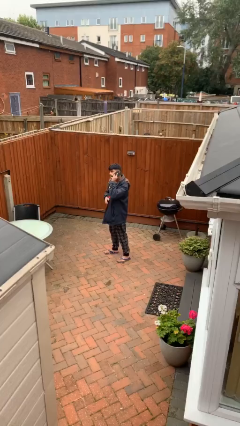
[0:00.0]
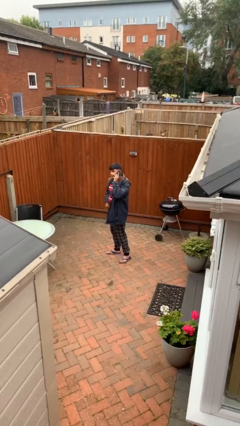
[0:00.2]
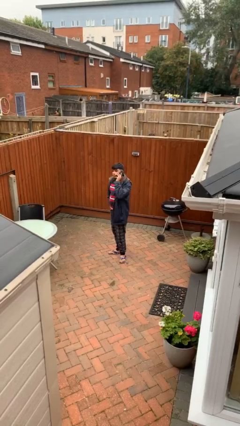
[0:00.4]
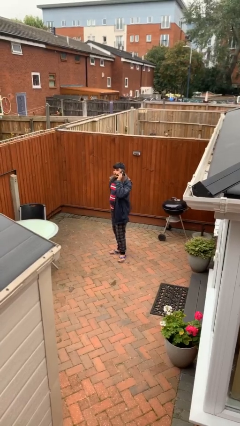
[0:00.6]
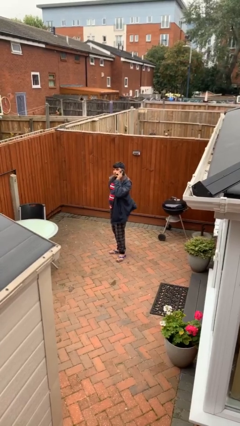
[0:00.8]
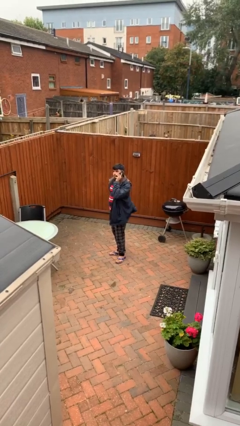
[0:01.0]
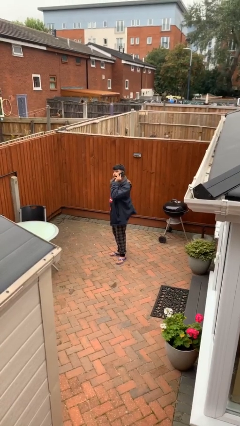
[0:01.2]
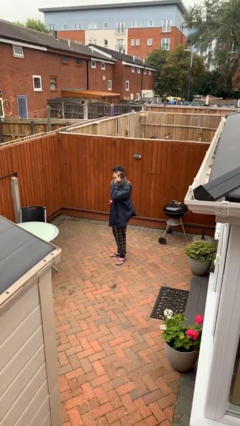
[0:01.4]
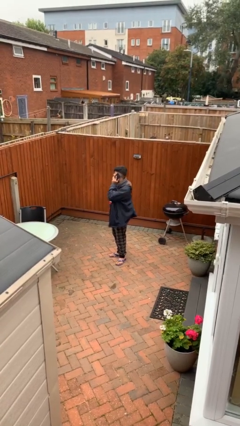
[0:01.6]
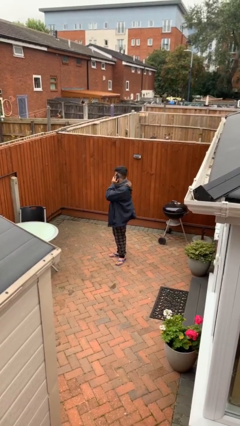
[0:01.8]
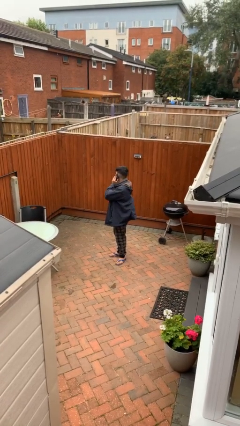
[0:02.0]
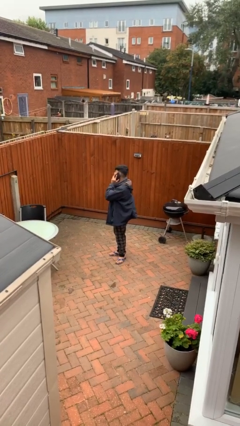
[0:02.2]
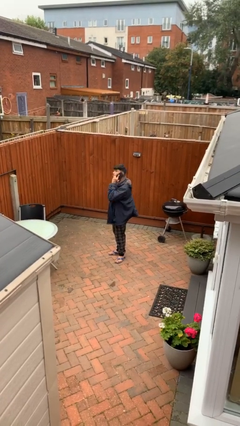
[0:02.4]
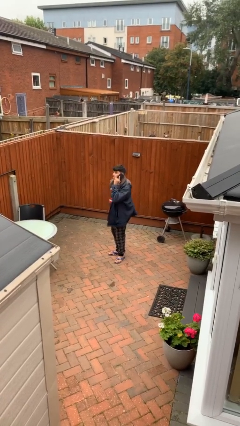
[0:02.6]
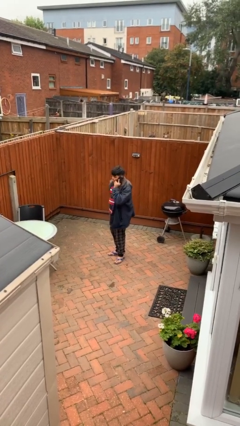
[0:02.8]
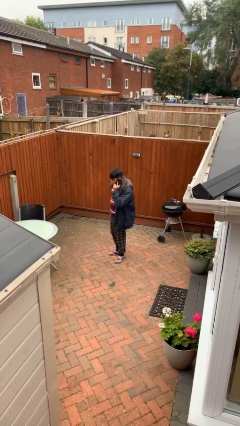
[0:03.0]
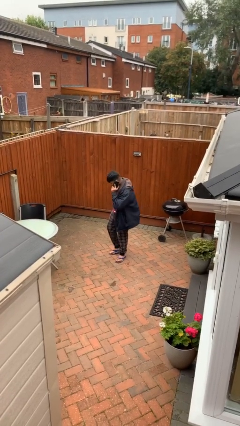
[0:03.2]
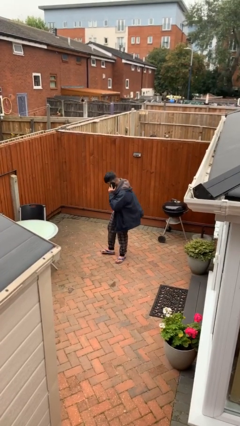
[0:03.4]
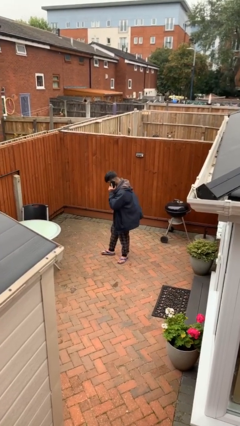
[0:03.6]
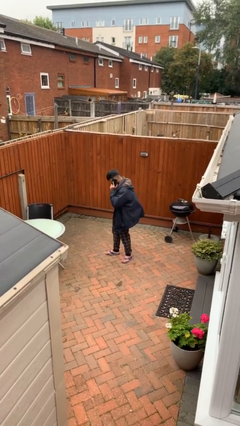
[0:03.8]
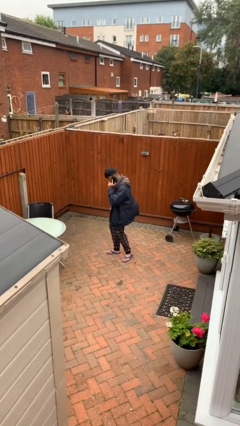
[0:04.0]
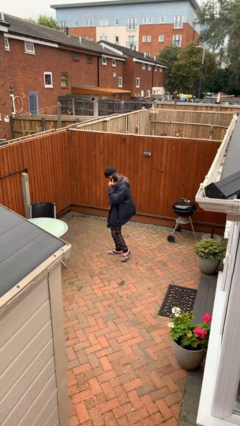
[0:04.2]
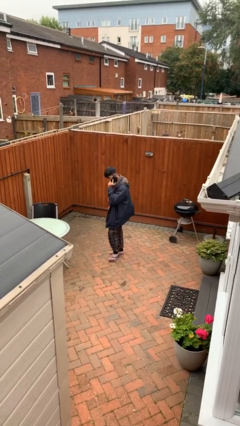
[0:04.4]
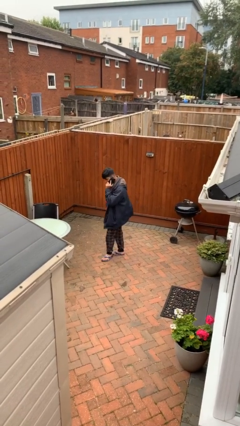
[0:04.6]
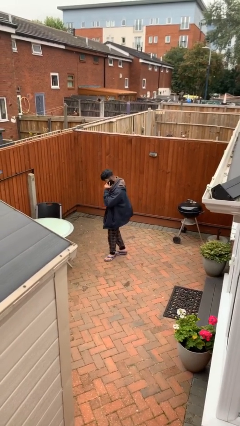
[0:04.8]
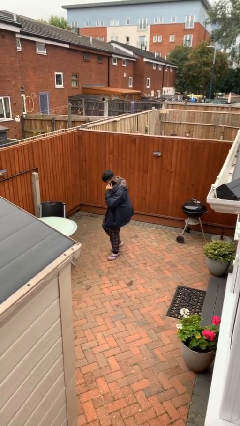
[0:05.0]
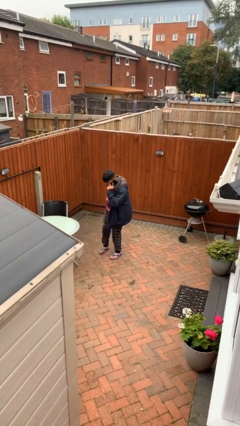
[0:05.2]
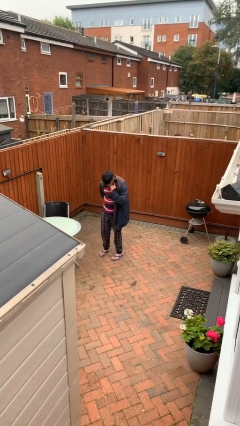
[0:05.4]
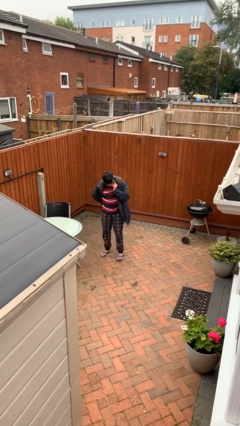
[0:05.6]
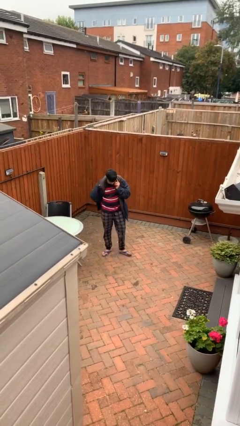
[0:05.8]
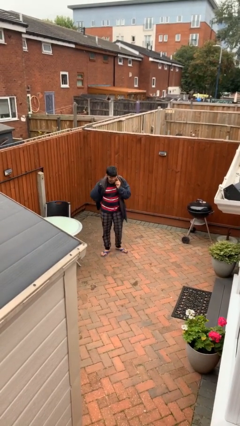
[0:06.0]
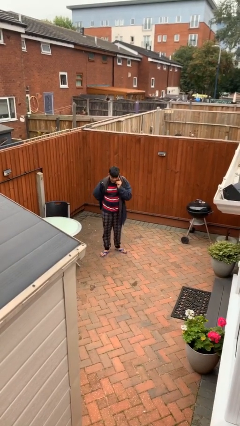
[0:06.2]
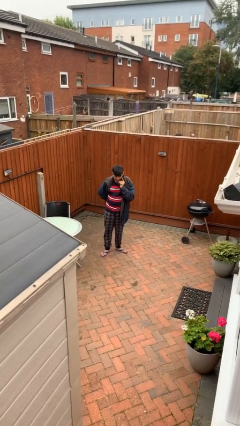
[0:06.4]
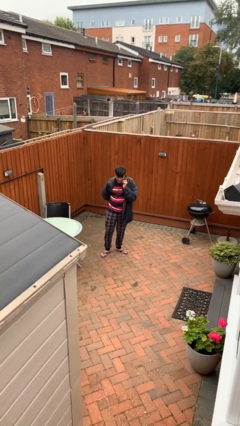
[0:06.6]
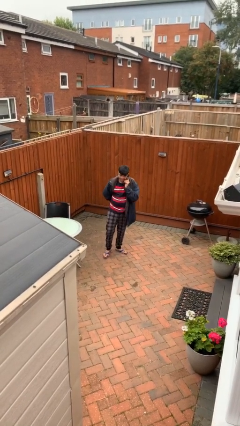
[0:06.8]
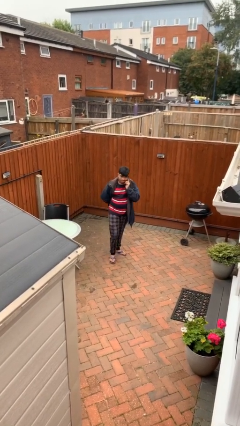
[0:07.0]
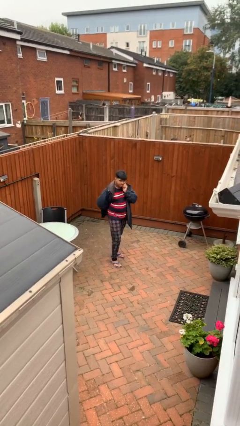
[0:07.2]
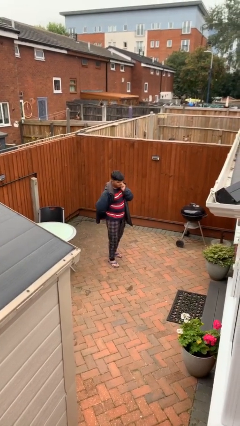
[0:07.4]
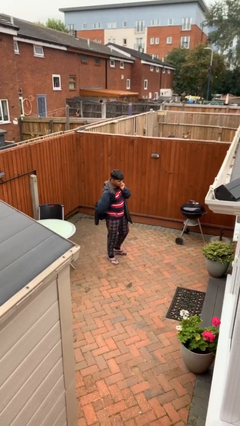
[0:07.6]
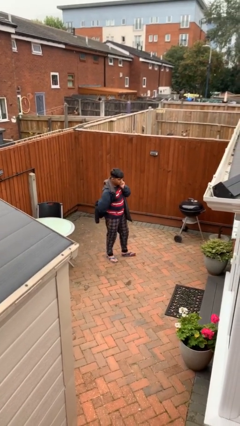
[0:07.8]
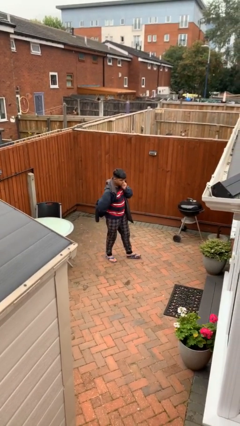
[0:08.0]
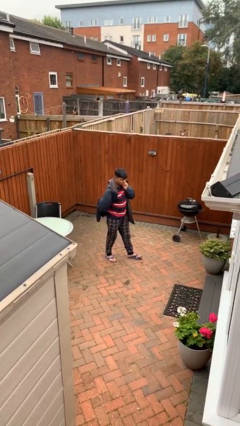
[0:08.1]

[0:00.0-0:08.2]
person talks on phone

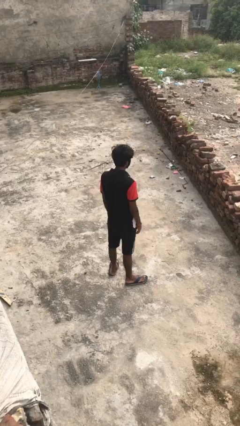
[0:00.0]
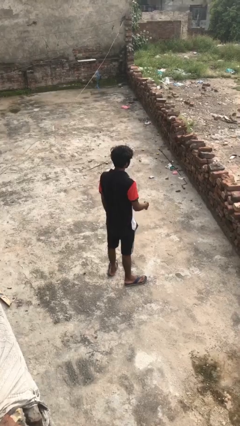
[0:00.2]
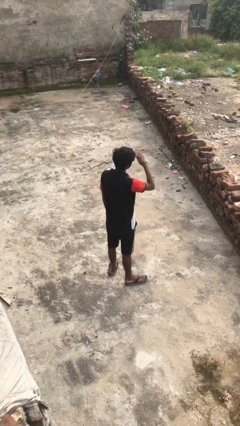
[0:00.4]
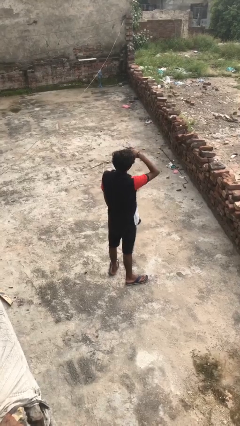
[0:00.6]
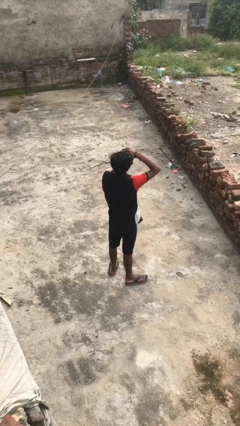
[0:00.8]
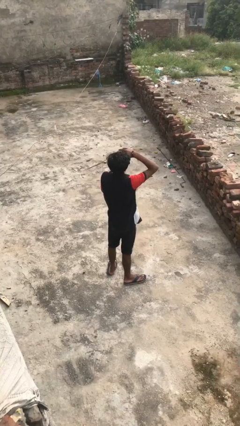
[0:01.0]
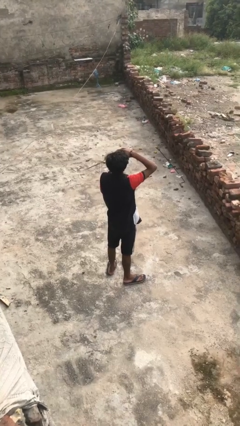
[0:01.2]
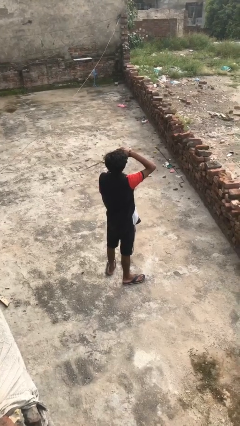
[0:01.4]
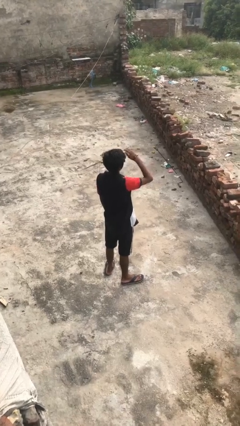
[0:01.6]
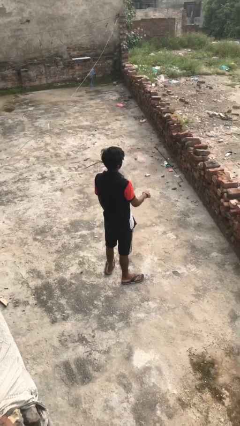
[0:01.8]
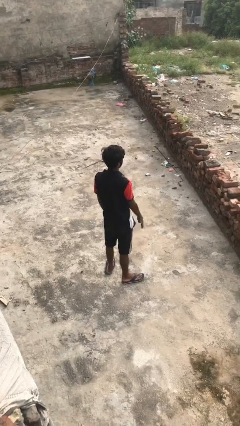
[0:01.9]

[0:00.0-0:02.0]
person shades eyes

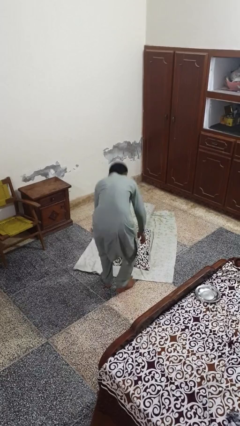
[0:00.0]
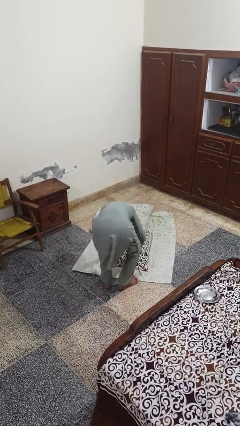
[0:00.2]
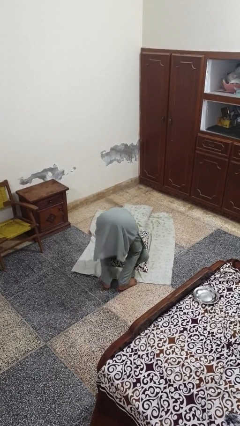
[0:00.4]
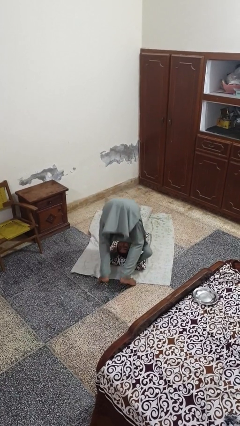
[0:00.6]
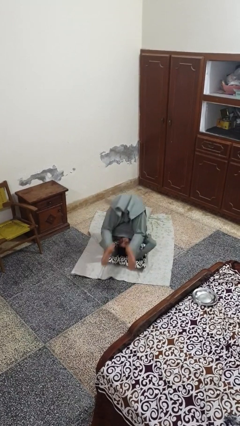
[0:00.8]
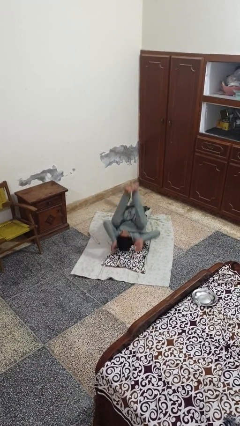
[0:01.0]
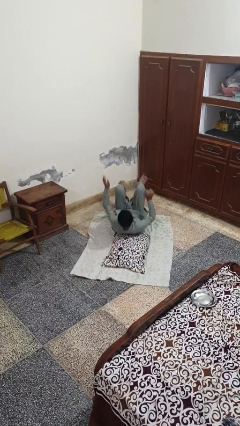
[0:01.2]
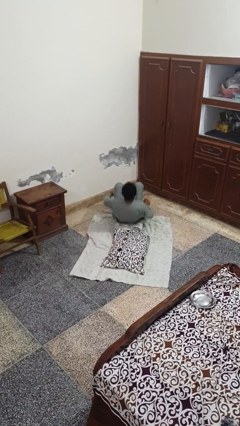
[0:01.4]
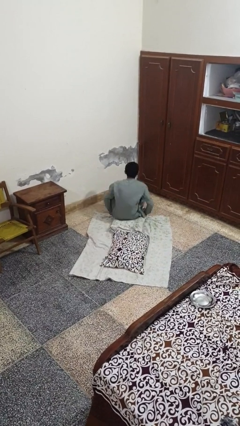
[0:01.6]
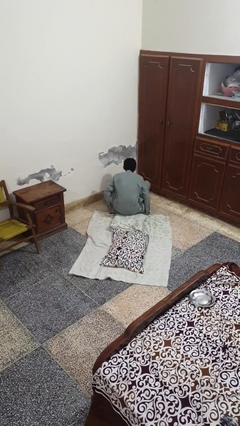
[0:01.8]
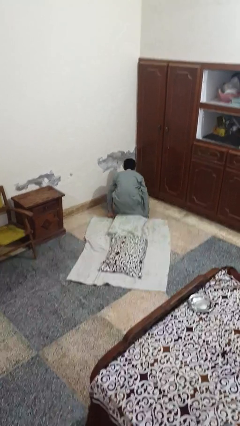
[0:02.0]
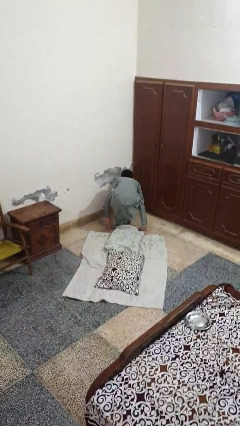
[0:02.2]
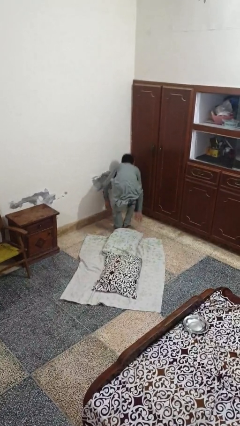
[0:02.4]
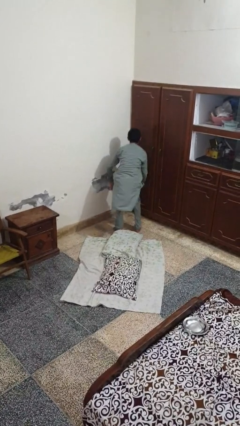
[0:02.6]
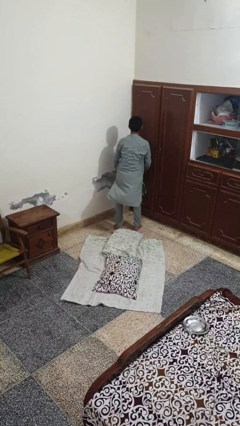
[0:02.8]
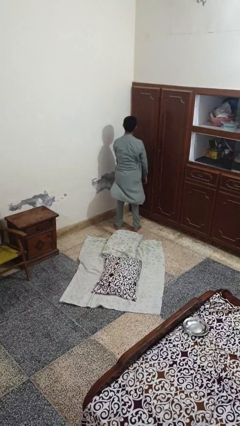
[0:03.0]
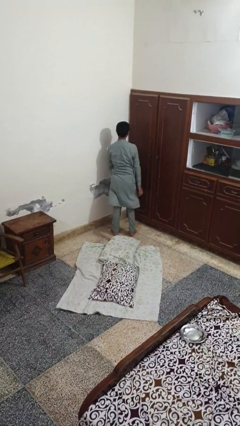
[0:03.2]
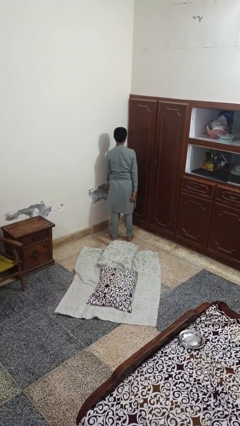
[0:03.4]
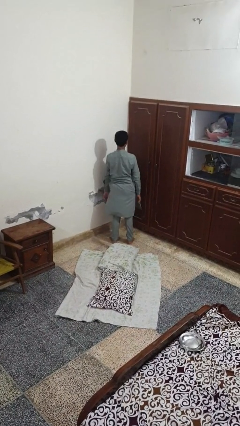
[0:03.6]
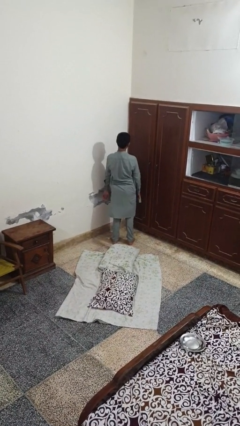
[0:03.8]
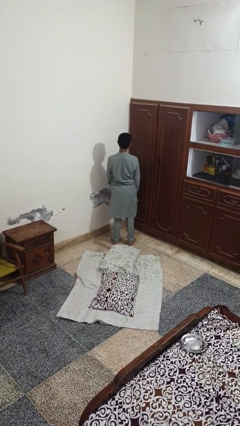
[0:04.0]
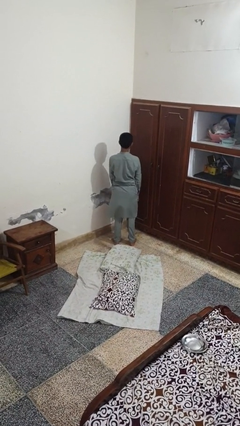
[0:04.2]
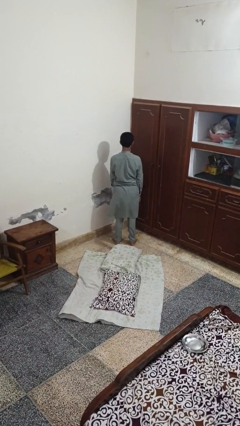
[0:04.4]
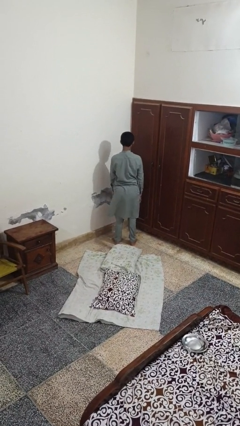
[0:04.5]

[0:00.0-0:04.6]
person somersaults

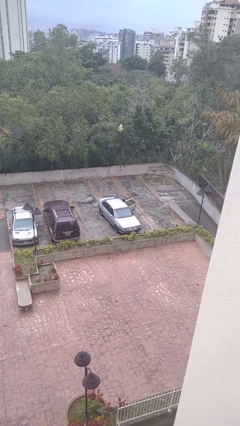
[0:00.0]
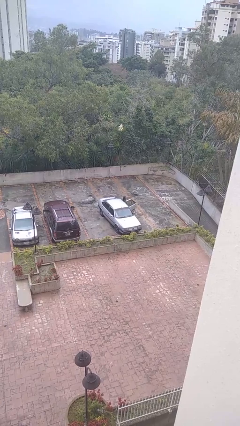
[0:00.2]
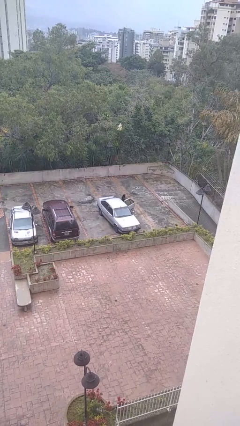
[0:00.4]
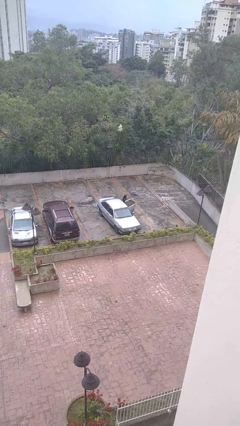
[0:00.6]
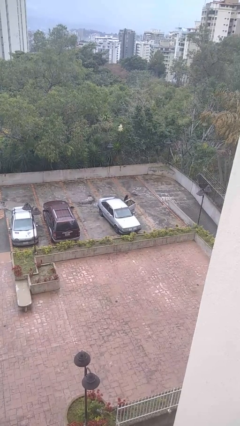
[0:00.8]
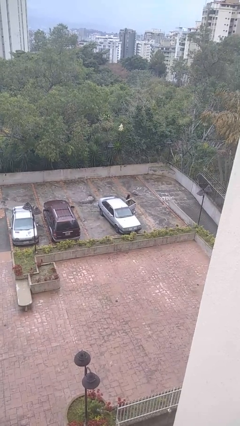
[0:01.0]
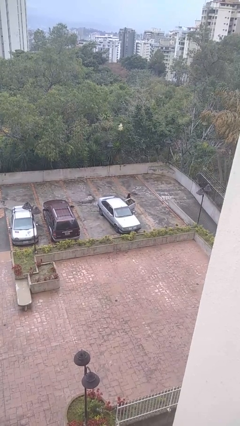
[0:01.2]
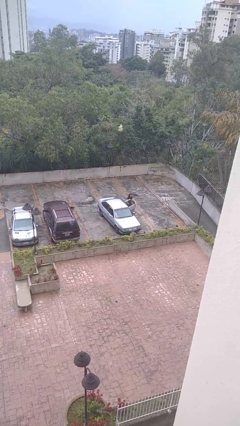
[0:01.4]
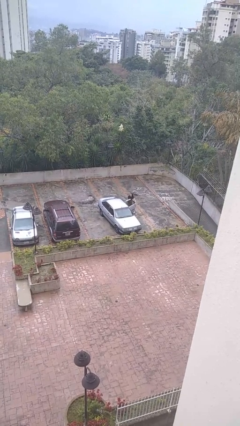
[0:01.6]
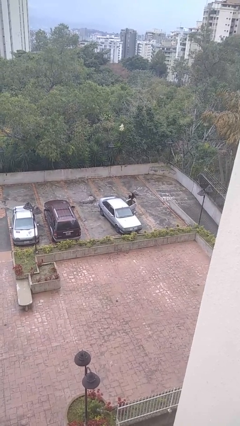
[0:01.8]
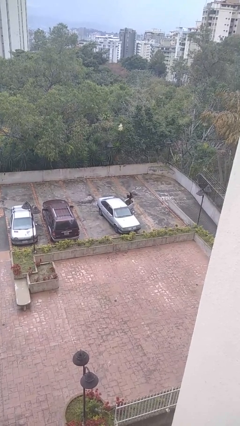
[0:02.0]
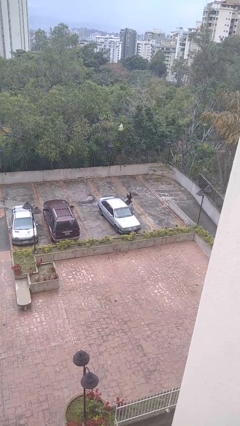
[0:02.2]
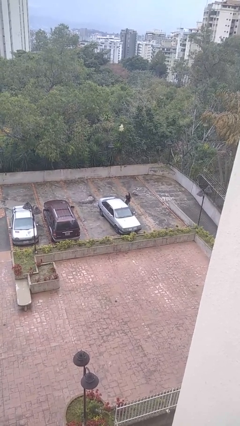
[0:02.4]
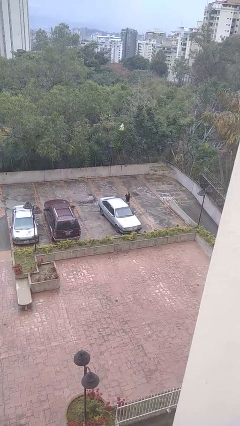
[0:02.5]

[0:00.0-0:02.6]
car drops off person
